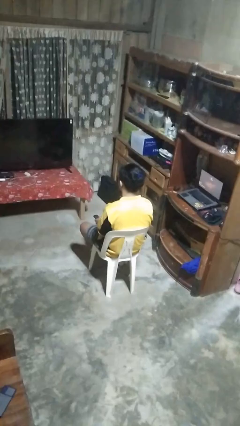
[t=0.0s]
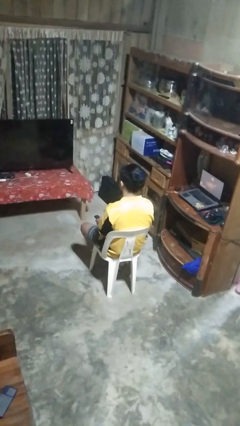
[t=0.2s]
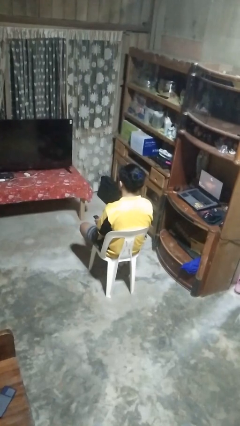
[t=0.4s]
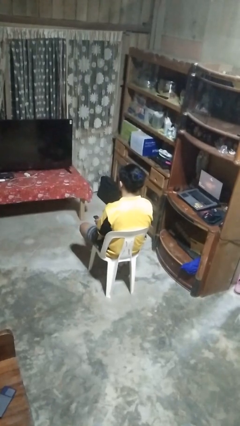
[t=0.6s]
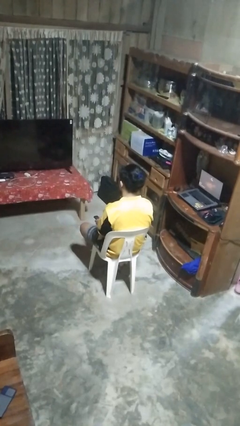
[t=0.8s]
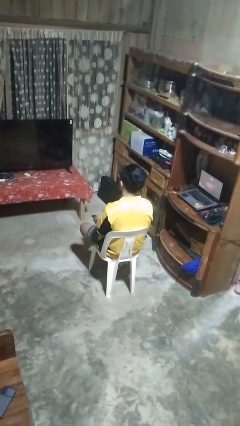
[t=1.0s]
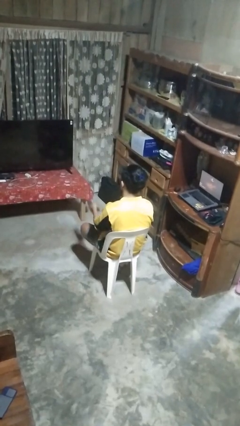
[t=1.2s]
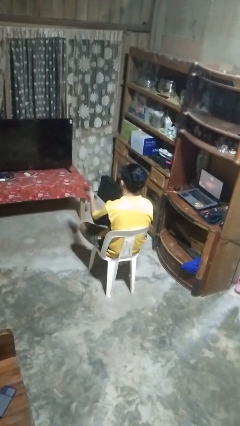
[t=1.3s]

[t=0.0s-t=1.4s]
person uses television remote

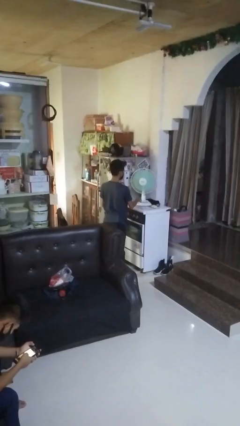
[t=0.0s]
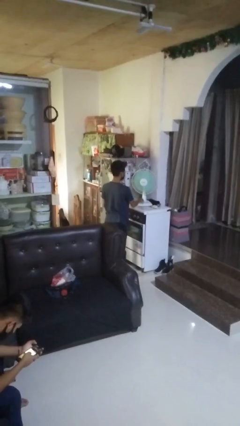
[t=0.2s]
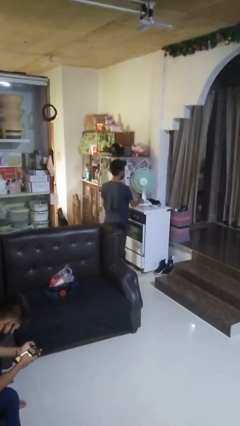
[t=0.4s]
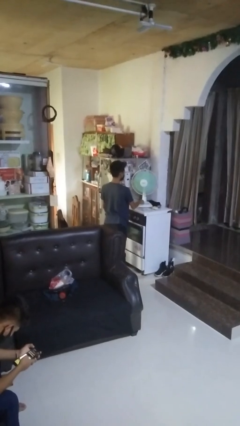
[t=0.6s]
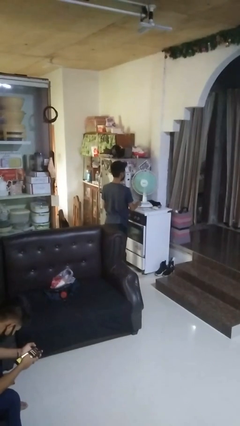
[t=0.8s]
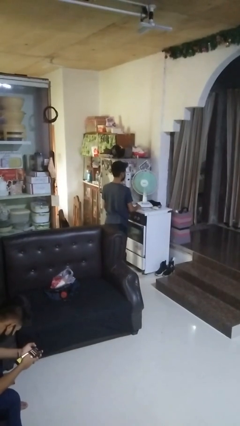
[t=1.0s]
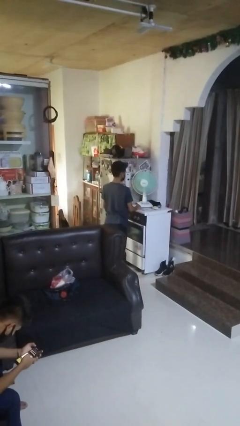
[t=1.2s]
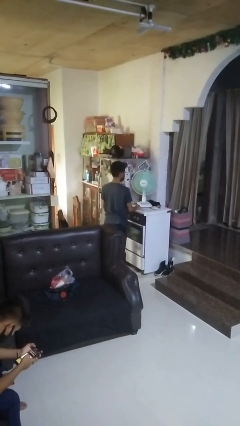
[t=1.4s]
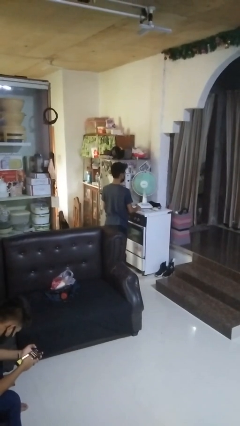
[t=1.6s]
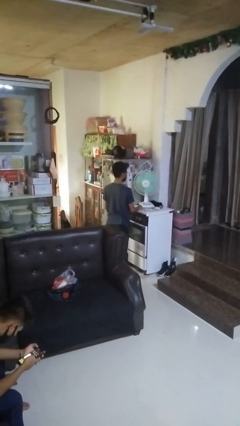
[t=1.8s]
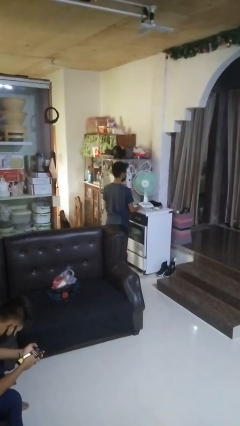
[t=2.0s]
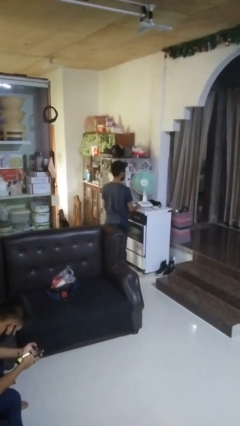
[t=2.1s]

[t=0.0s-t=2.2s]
person turns on fan

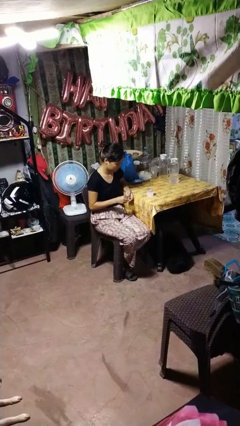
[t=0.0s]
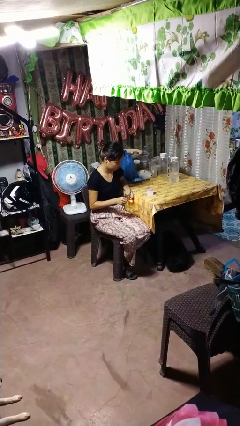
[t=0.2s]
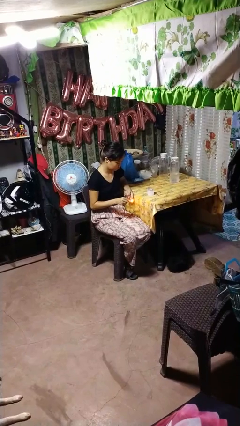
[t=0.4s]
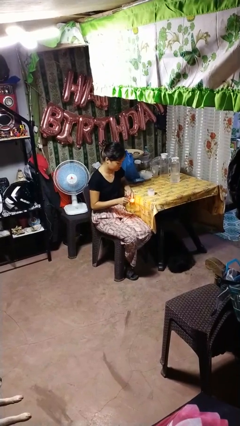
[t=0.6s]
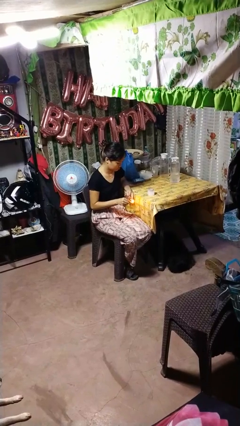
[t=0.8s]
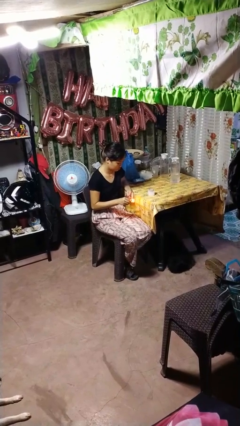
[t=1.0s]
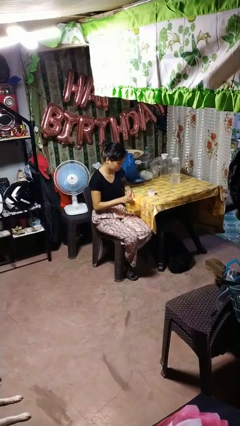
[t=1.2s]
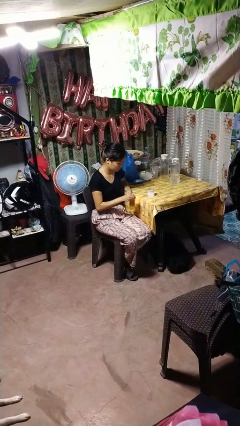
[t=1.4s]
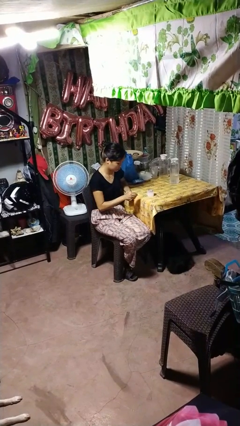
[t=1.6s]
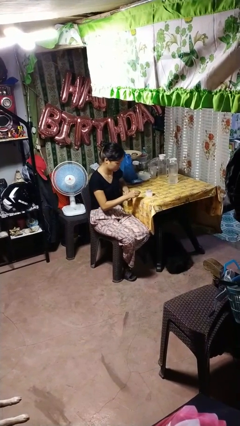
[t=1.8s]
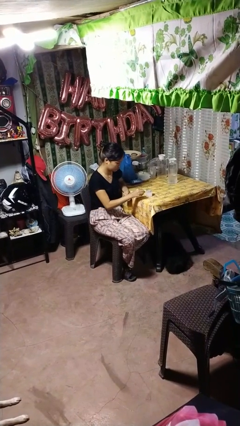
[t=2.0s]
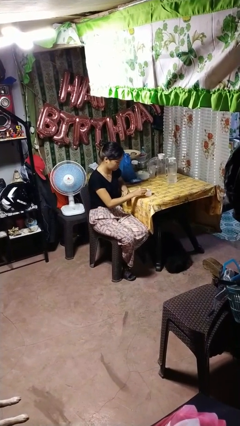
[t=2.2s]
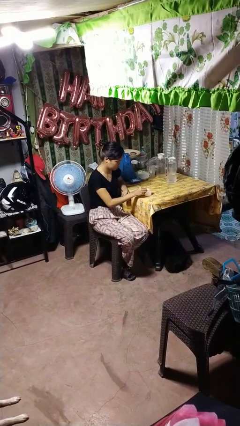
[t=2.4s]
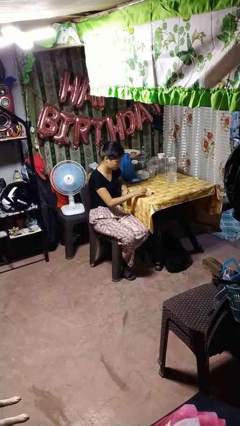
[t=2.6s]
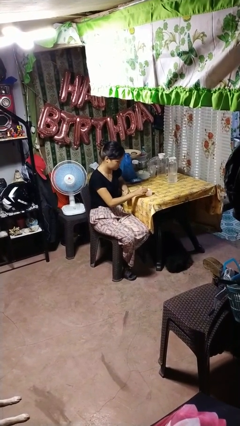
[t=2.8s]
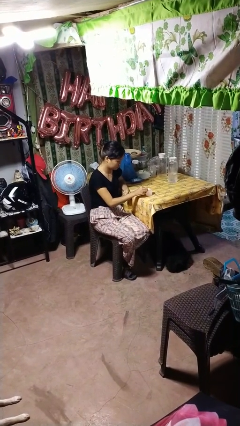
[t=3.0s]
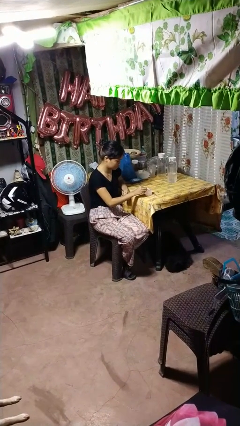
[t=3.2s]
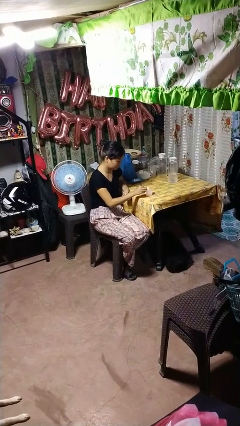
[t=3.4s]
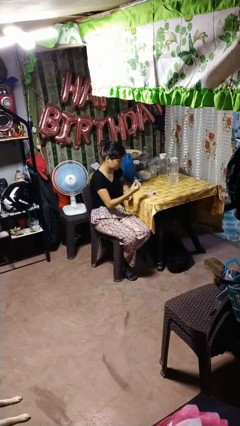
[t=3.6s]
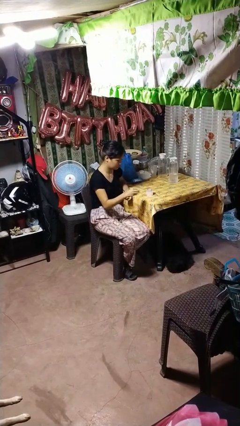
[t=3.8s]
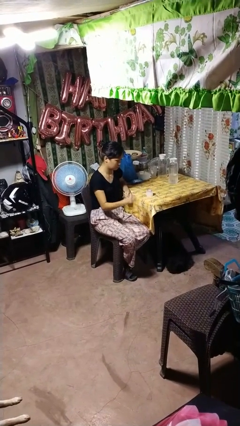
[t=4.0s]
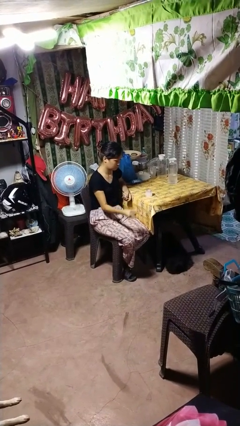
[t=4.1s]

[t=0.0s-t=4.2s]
person lights candle

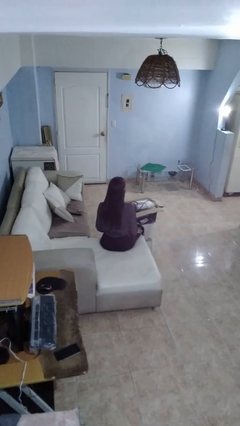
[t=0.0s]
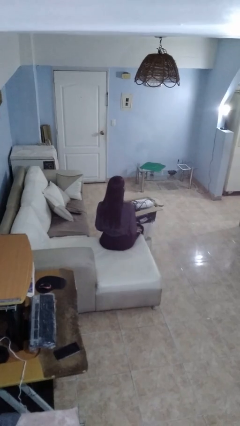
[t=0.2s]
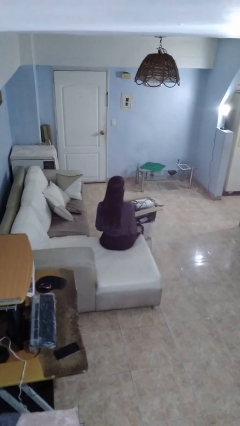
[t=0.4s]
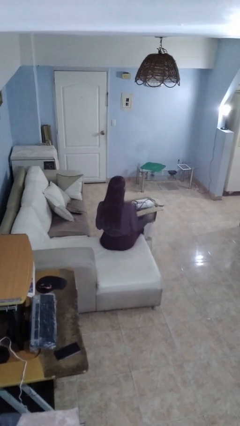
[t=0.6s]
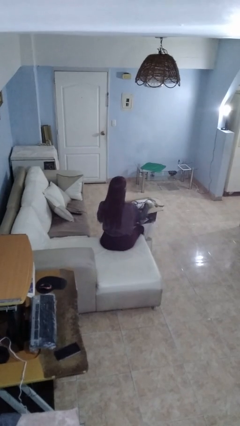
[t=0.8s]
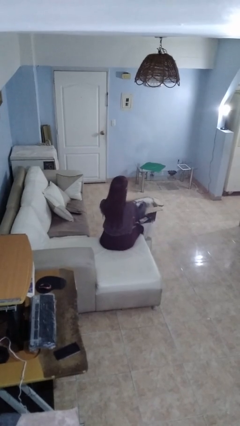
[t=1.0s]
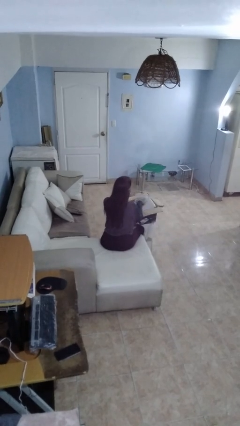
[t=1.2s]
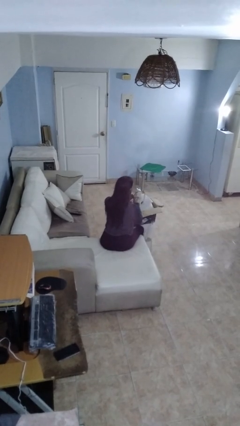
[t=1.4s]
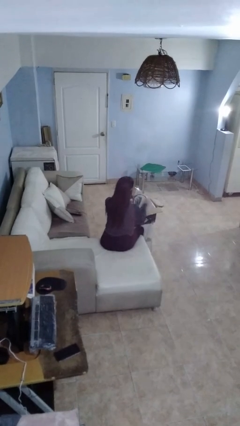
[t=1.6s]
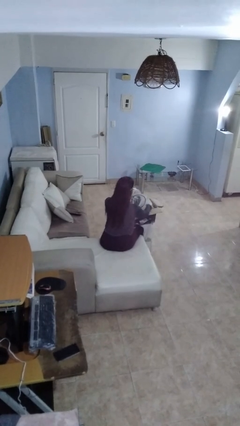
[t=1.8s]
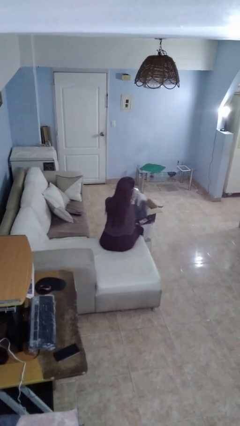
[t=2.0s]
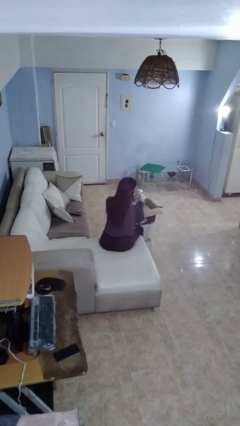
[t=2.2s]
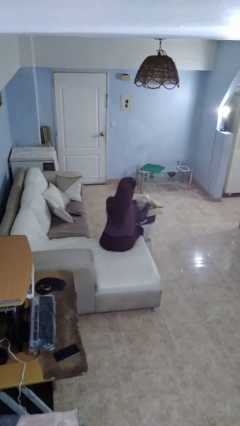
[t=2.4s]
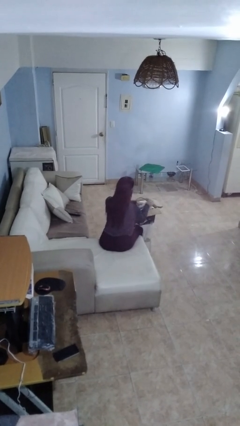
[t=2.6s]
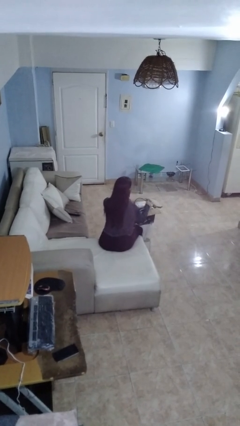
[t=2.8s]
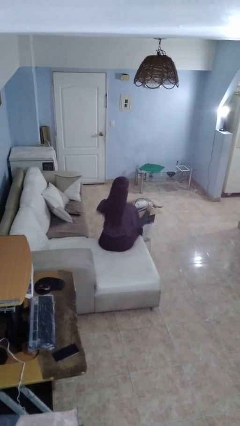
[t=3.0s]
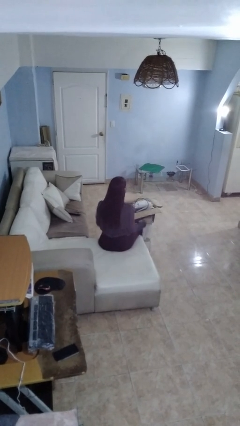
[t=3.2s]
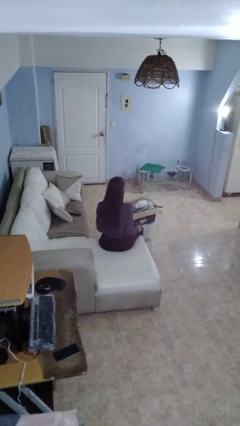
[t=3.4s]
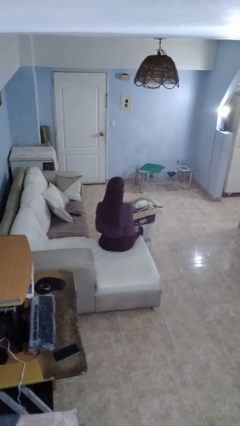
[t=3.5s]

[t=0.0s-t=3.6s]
person searches in box

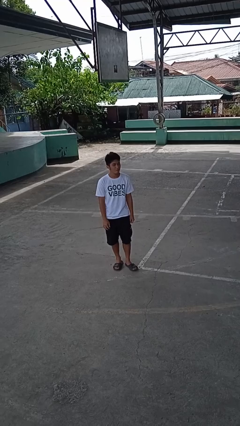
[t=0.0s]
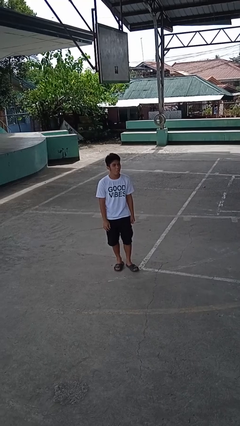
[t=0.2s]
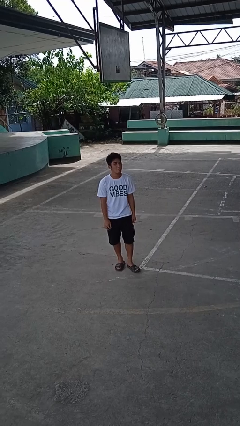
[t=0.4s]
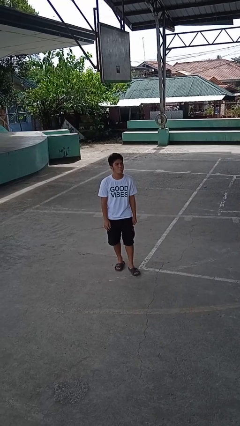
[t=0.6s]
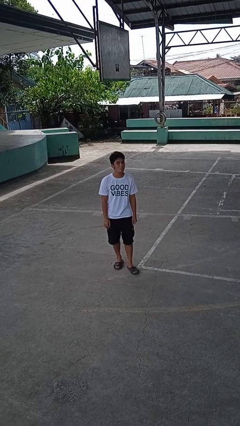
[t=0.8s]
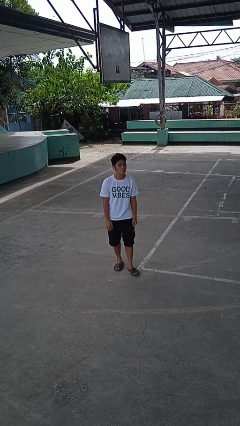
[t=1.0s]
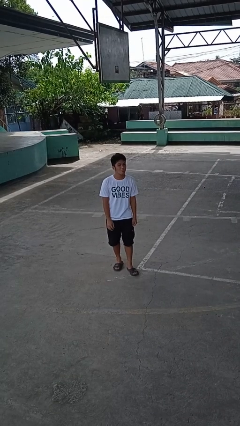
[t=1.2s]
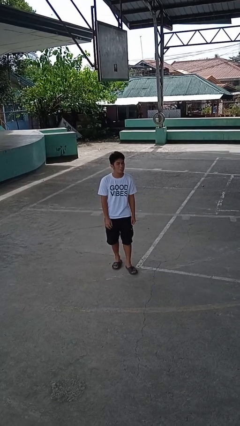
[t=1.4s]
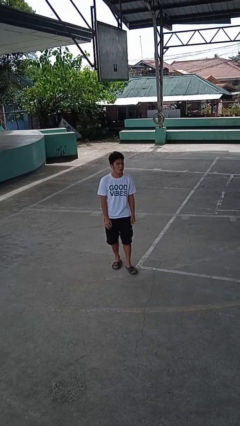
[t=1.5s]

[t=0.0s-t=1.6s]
person sticks out tongue

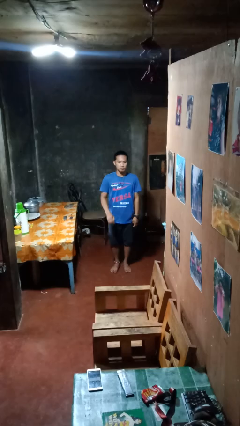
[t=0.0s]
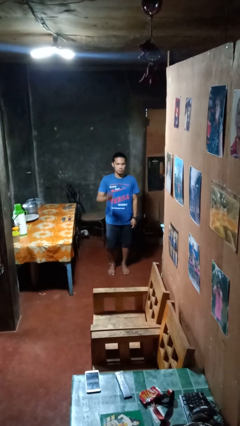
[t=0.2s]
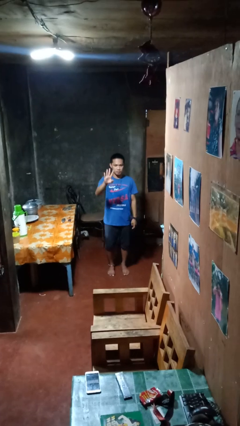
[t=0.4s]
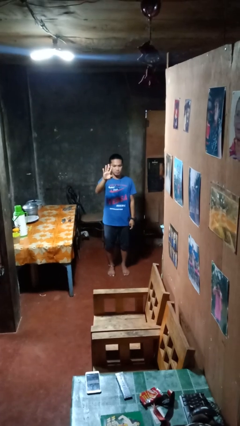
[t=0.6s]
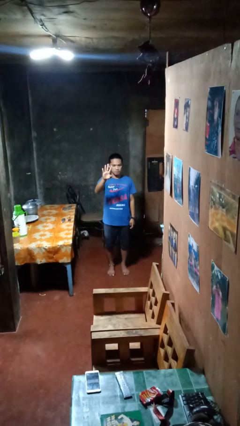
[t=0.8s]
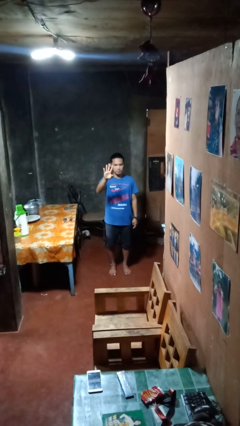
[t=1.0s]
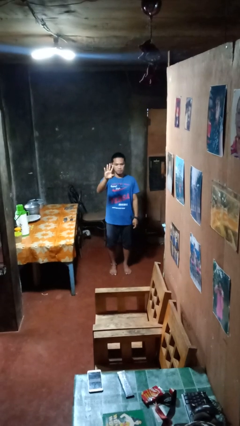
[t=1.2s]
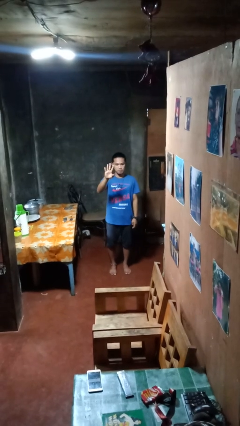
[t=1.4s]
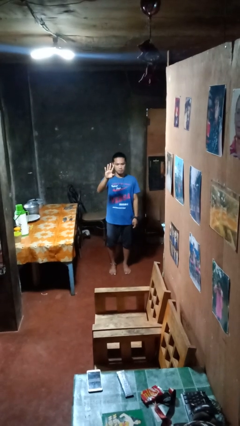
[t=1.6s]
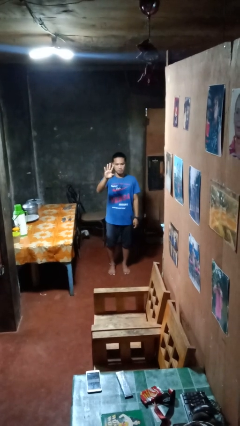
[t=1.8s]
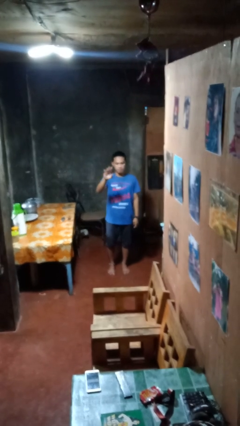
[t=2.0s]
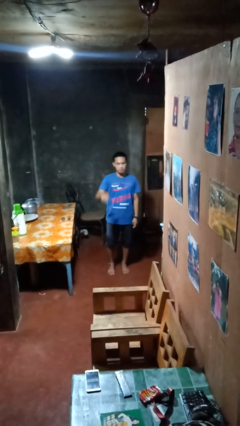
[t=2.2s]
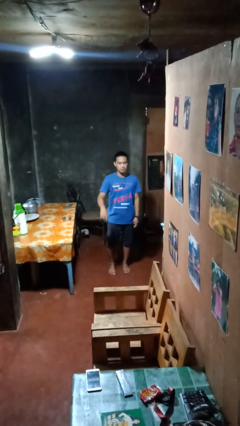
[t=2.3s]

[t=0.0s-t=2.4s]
person gestures number four

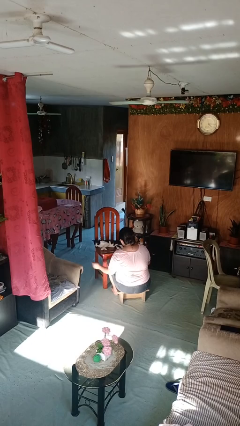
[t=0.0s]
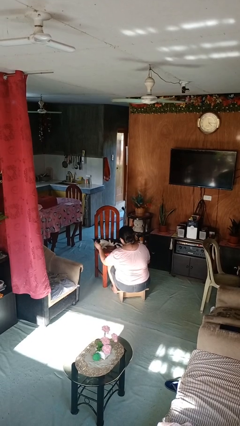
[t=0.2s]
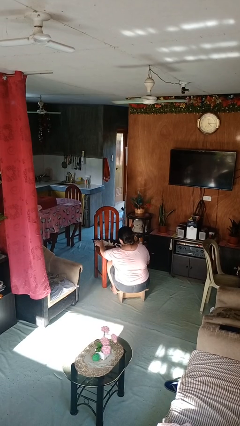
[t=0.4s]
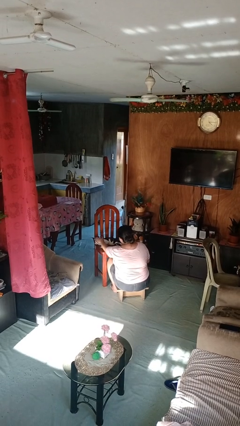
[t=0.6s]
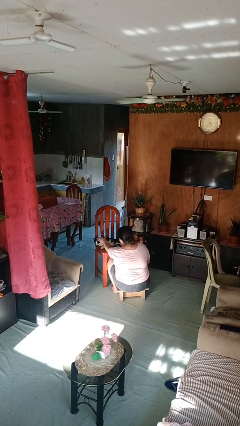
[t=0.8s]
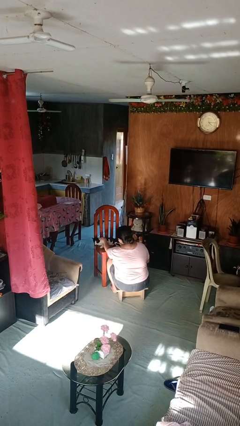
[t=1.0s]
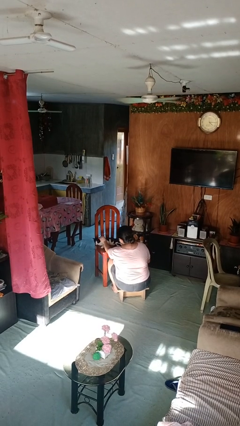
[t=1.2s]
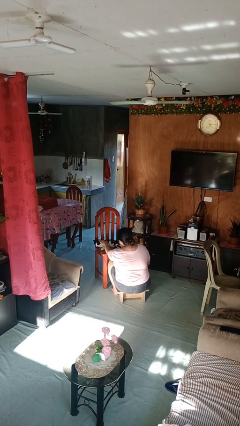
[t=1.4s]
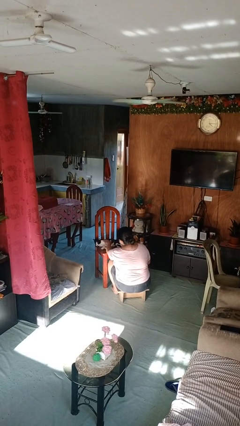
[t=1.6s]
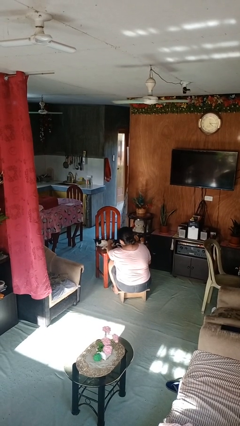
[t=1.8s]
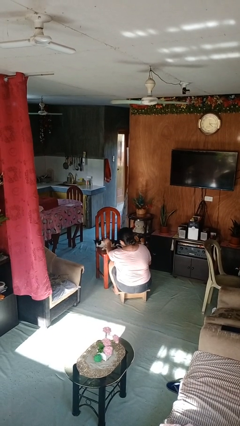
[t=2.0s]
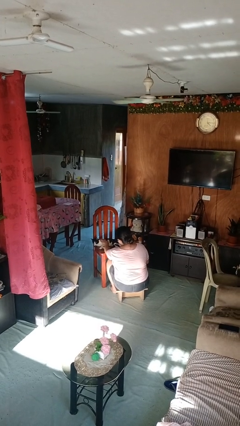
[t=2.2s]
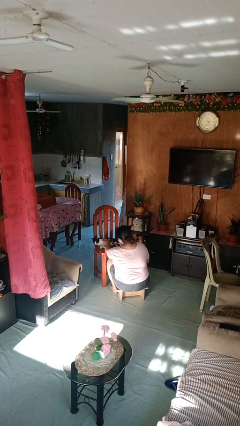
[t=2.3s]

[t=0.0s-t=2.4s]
person pets cat
